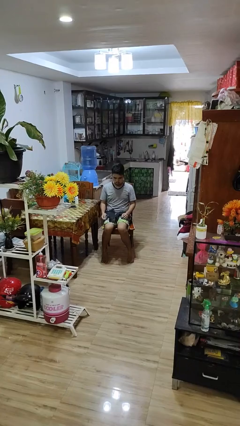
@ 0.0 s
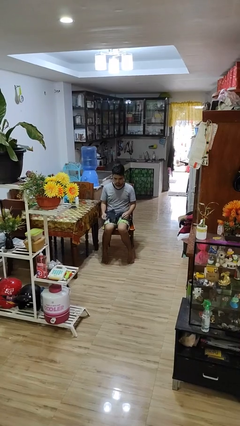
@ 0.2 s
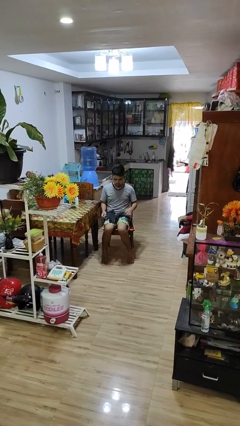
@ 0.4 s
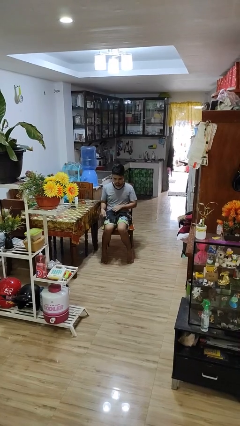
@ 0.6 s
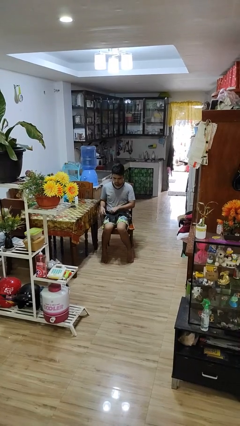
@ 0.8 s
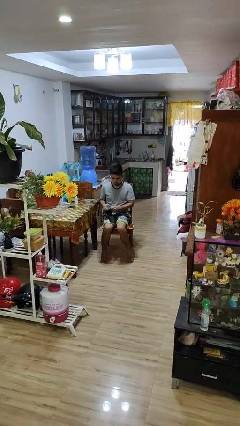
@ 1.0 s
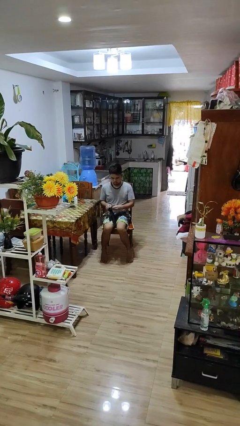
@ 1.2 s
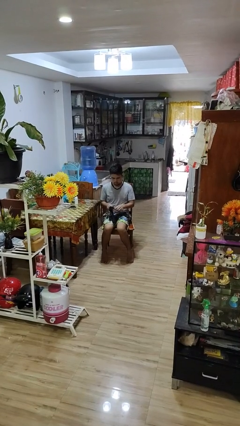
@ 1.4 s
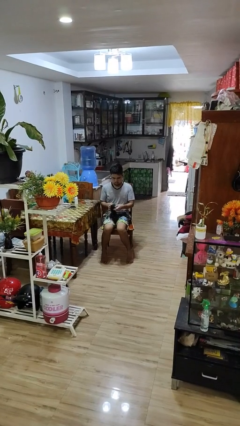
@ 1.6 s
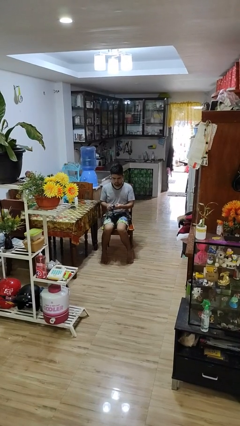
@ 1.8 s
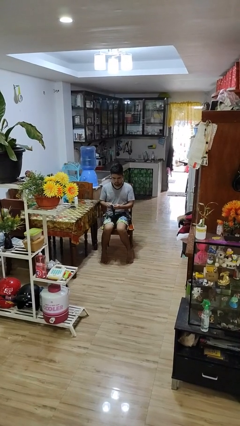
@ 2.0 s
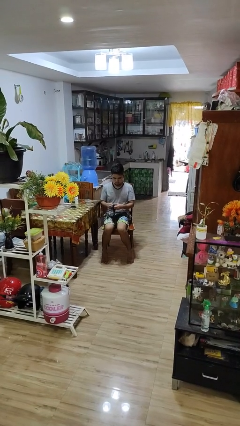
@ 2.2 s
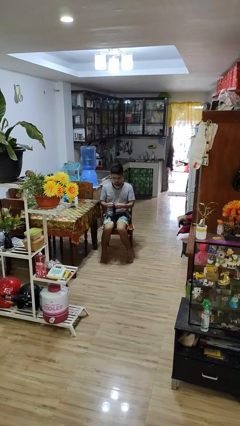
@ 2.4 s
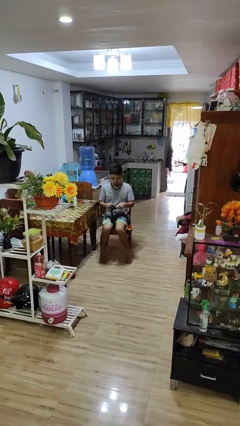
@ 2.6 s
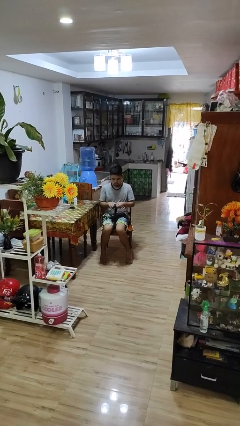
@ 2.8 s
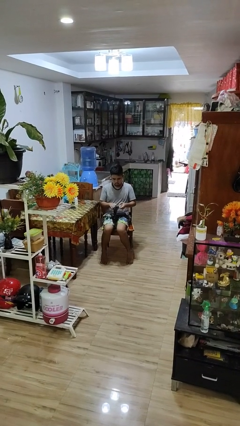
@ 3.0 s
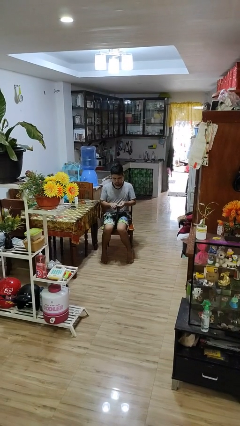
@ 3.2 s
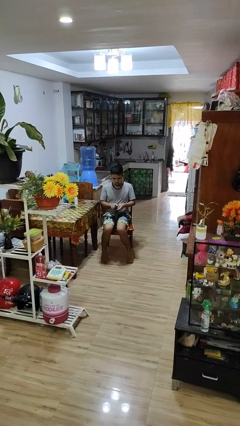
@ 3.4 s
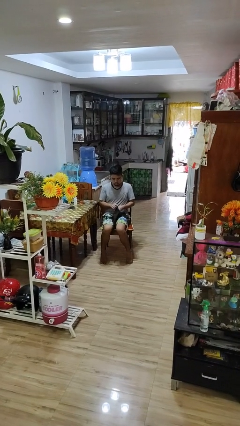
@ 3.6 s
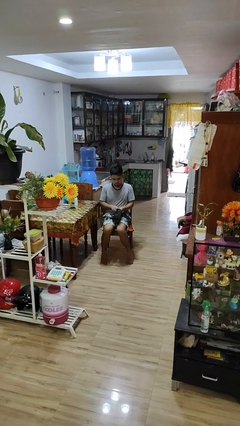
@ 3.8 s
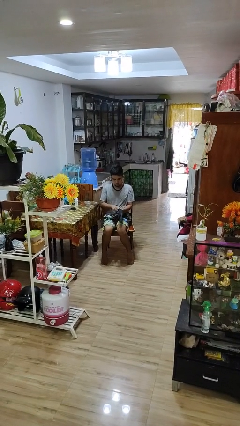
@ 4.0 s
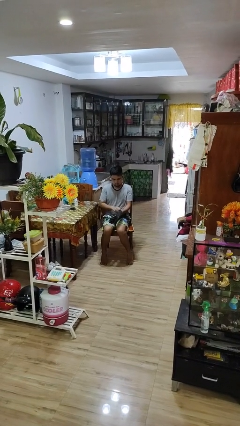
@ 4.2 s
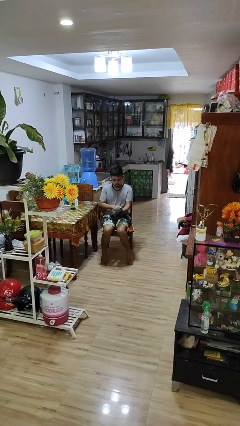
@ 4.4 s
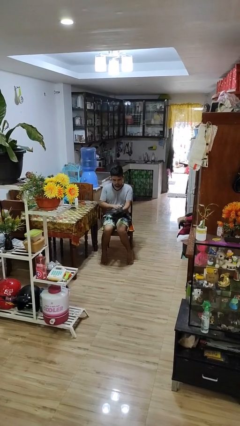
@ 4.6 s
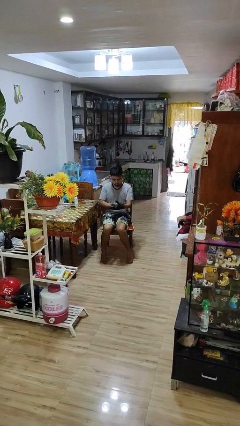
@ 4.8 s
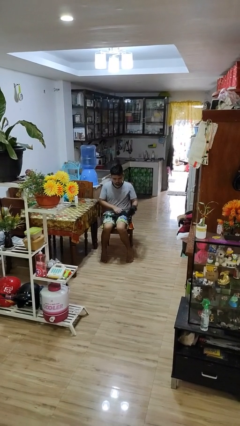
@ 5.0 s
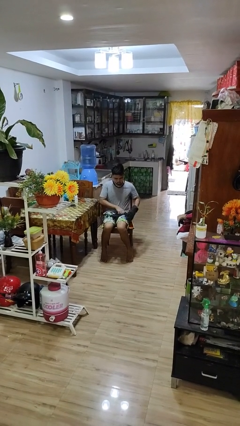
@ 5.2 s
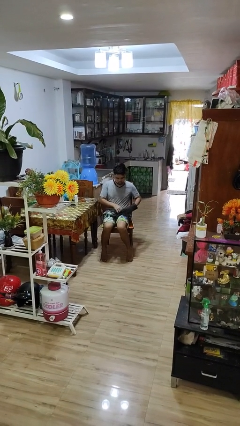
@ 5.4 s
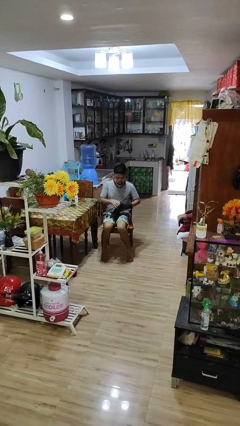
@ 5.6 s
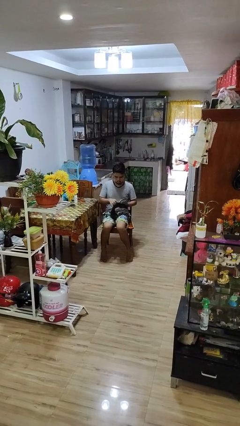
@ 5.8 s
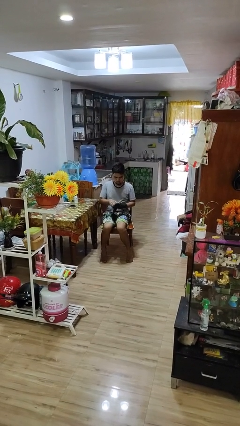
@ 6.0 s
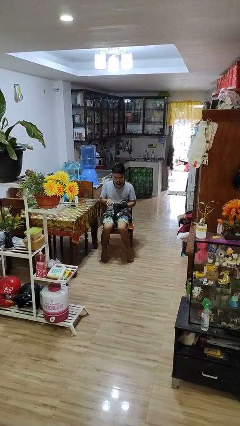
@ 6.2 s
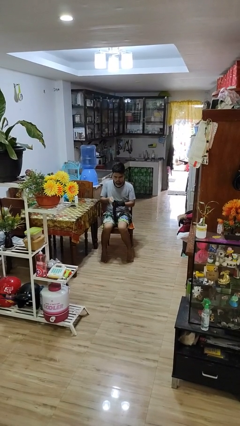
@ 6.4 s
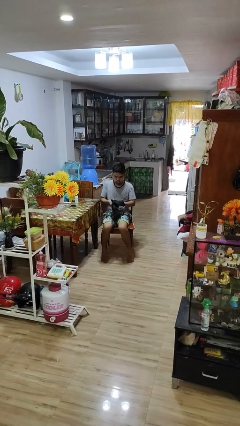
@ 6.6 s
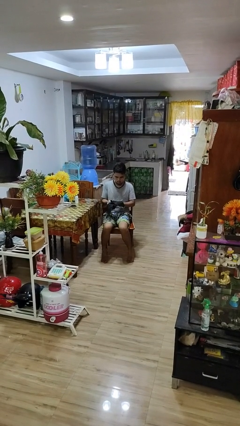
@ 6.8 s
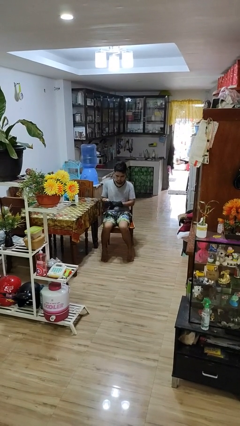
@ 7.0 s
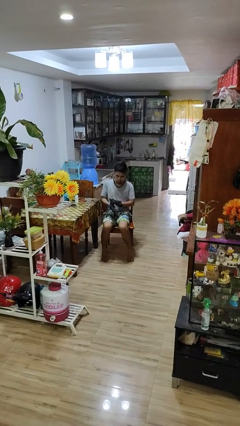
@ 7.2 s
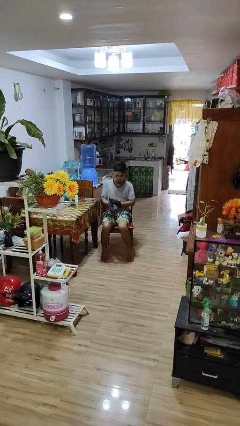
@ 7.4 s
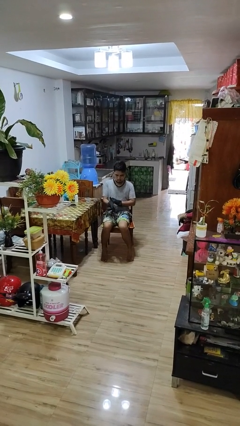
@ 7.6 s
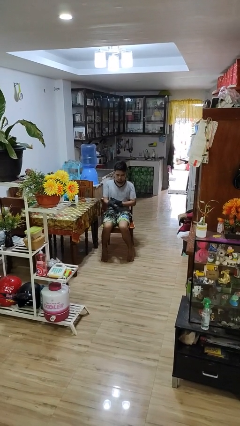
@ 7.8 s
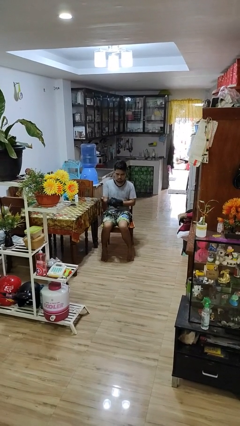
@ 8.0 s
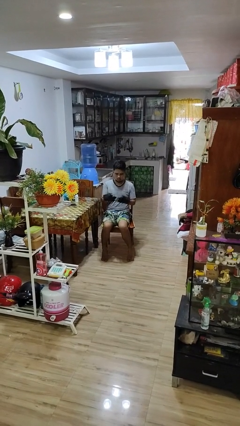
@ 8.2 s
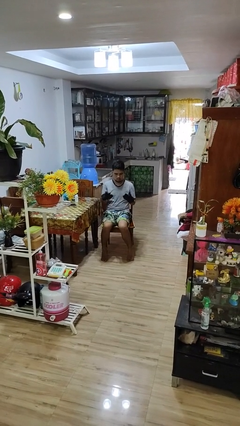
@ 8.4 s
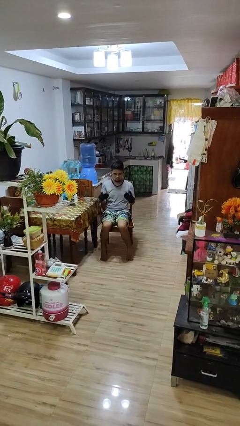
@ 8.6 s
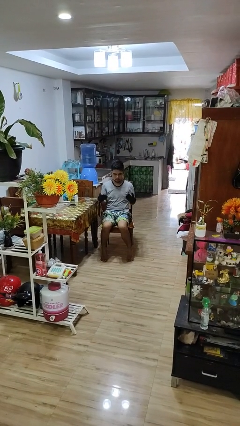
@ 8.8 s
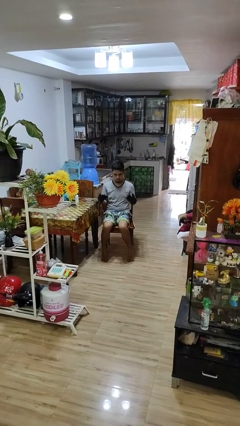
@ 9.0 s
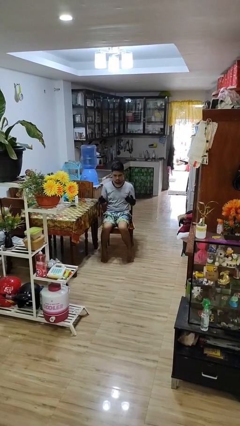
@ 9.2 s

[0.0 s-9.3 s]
person puts on gloves

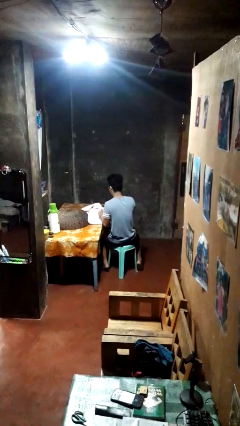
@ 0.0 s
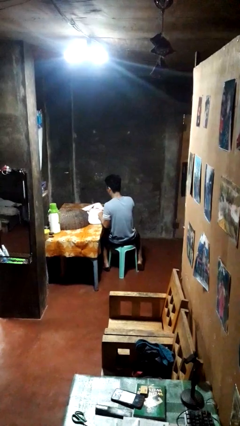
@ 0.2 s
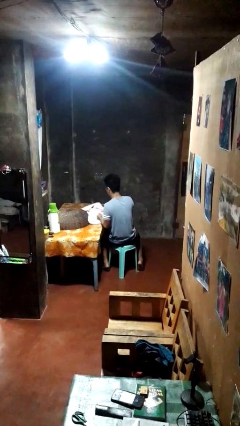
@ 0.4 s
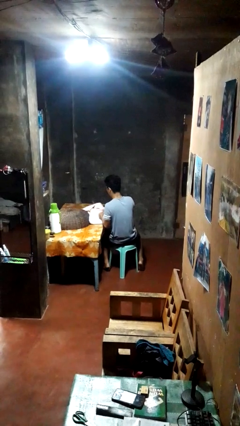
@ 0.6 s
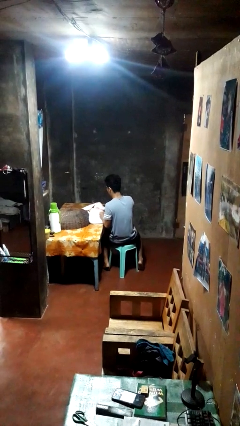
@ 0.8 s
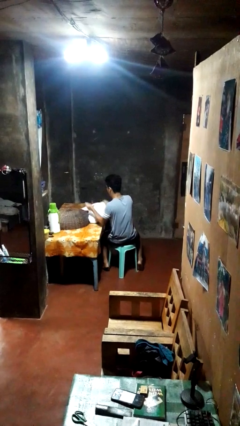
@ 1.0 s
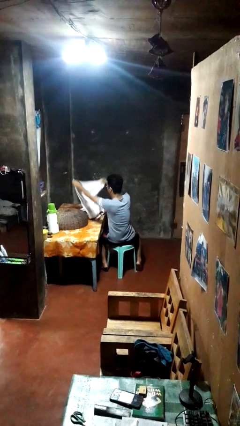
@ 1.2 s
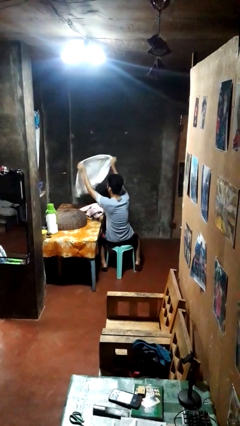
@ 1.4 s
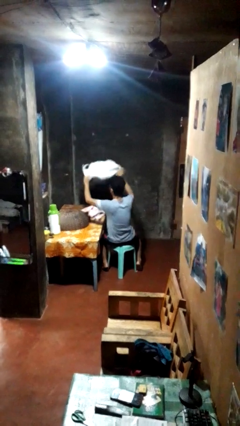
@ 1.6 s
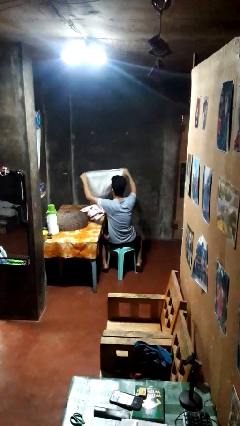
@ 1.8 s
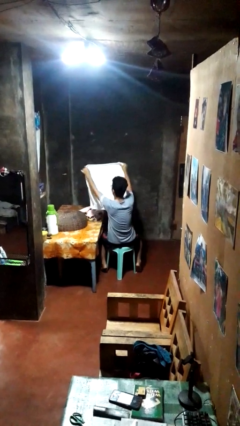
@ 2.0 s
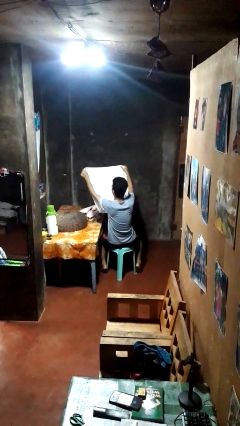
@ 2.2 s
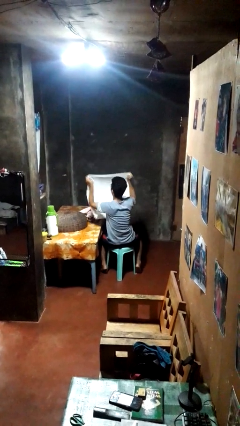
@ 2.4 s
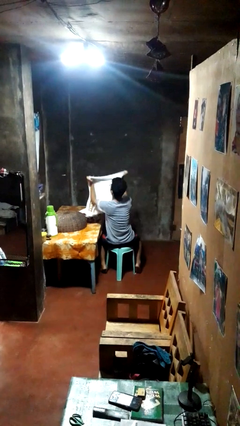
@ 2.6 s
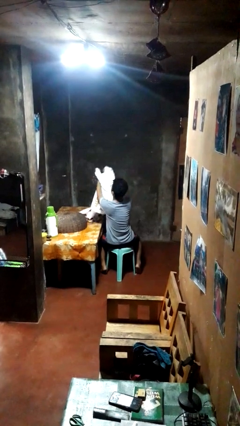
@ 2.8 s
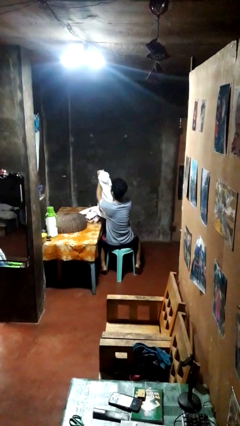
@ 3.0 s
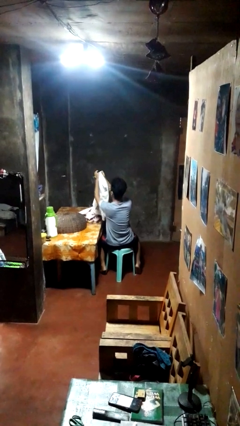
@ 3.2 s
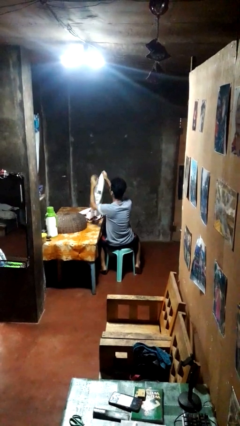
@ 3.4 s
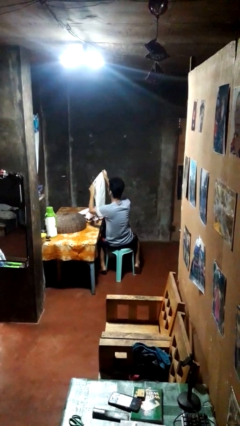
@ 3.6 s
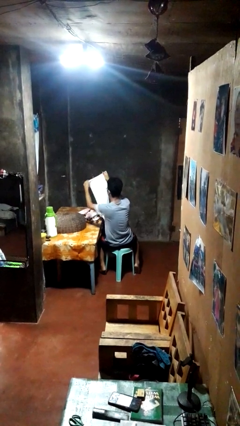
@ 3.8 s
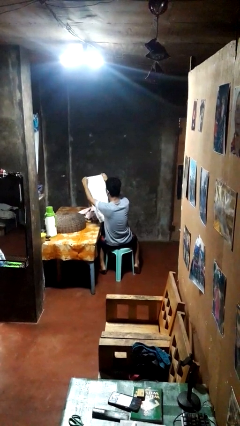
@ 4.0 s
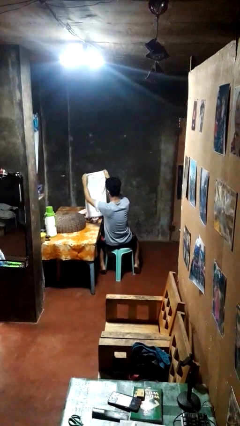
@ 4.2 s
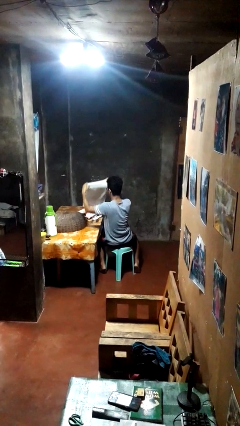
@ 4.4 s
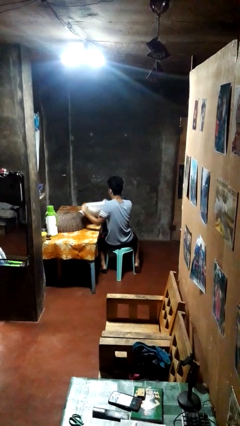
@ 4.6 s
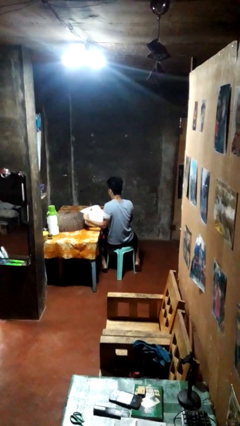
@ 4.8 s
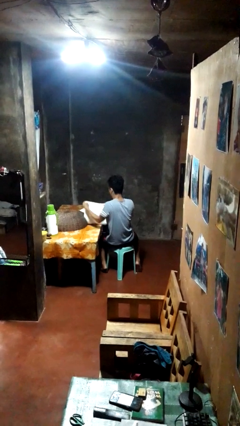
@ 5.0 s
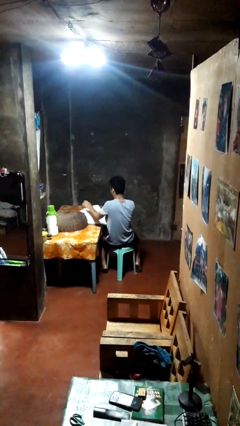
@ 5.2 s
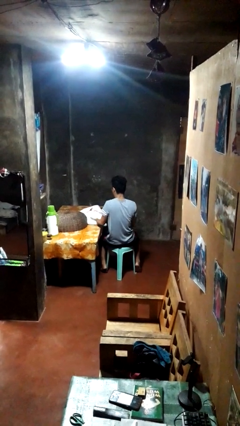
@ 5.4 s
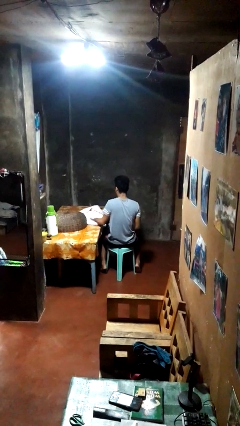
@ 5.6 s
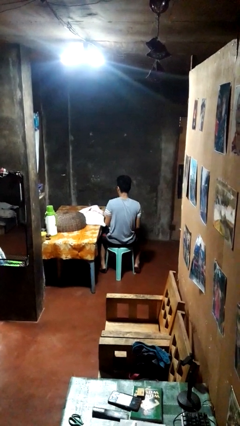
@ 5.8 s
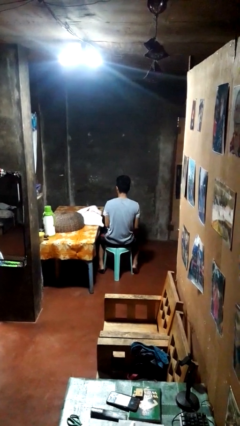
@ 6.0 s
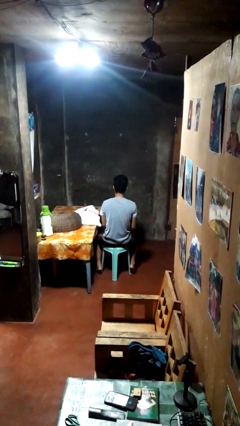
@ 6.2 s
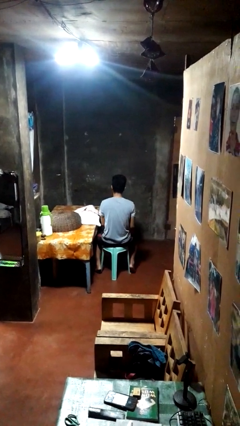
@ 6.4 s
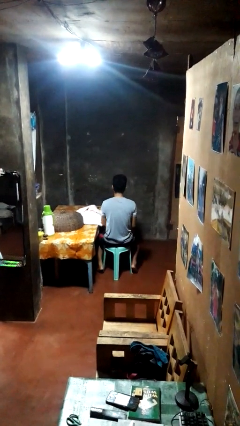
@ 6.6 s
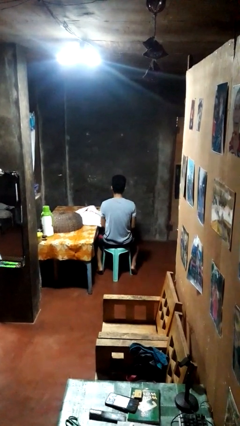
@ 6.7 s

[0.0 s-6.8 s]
person folds towel

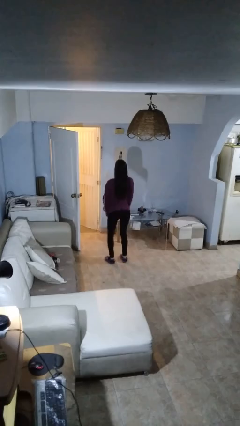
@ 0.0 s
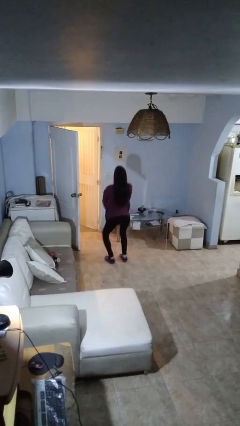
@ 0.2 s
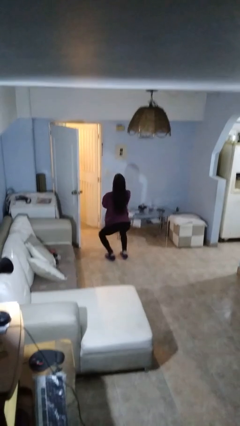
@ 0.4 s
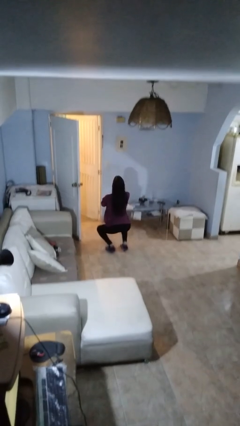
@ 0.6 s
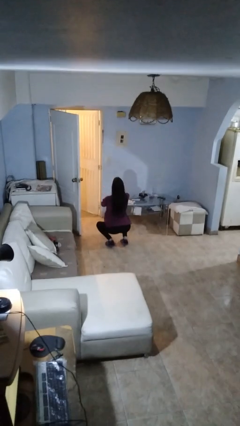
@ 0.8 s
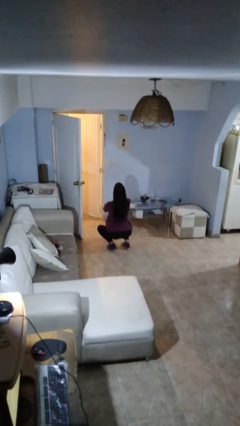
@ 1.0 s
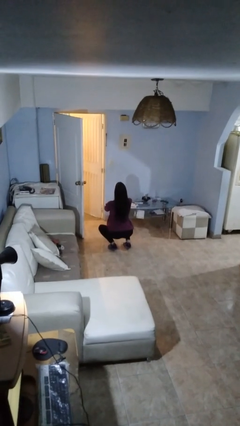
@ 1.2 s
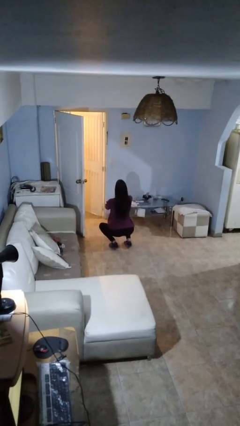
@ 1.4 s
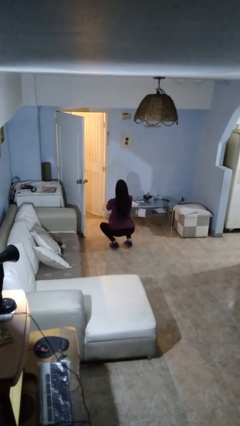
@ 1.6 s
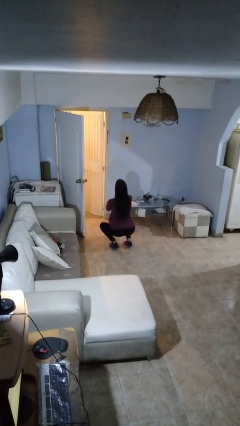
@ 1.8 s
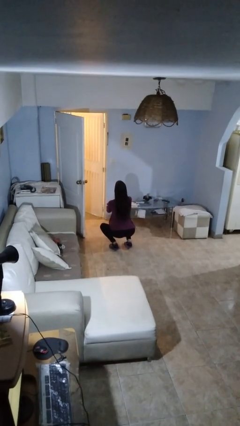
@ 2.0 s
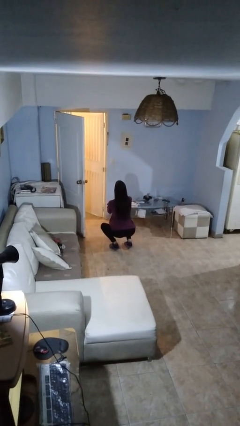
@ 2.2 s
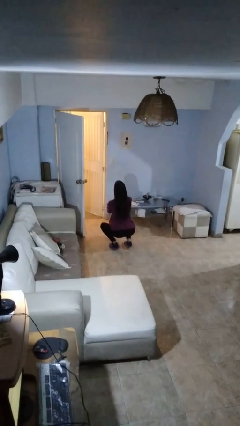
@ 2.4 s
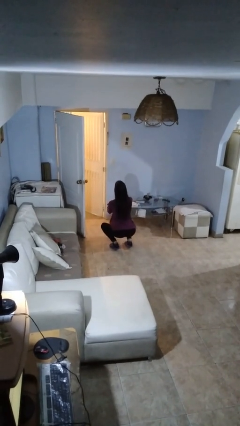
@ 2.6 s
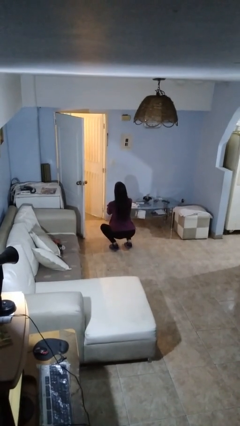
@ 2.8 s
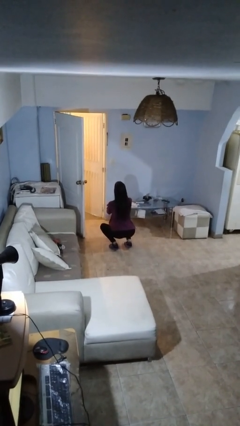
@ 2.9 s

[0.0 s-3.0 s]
person squats
